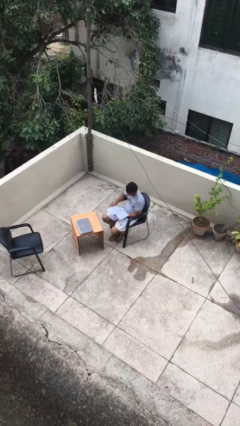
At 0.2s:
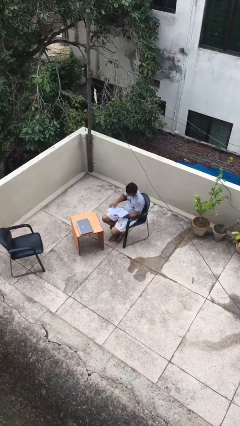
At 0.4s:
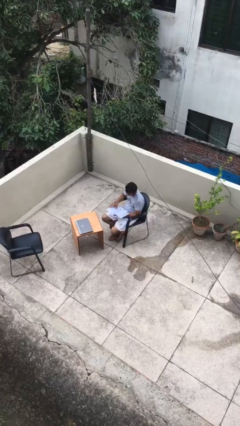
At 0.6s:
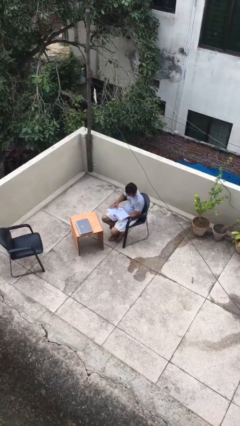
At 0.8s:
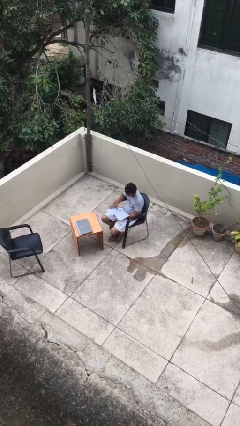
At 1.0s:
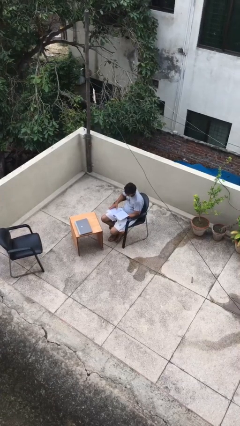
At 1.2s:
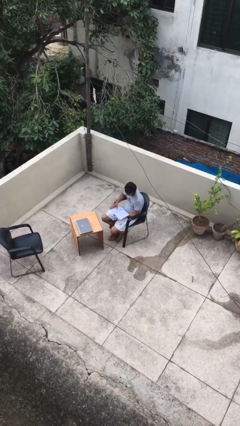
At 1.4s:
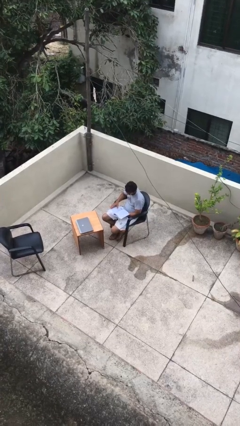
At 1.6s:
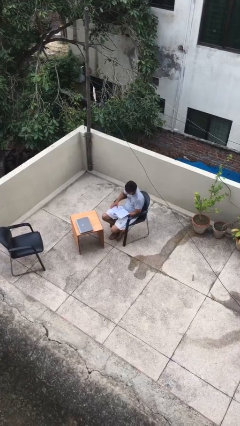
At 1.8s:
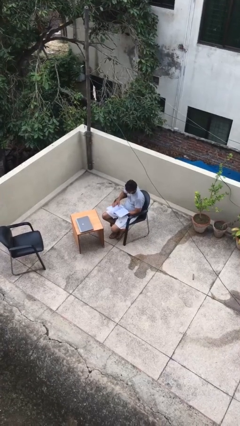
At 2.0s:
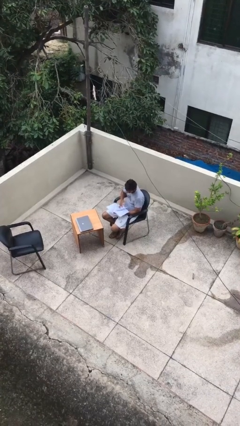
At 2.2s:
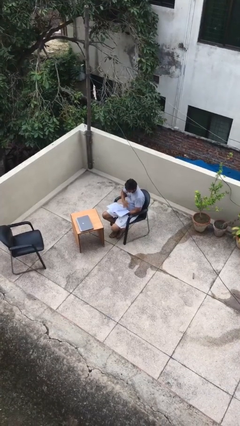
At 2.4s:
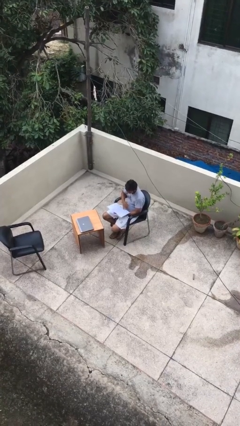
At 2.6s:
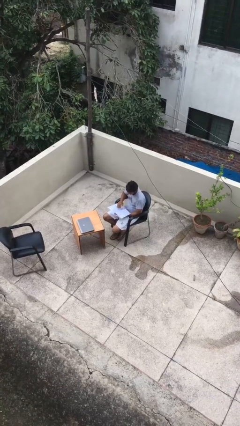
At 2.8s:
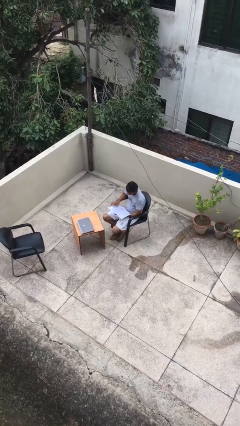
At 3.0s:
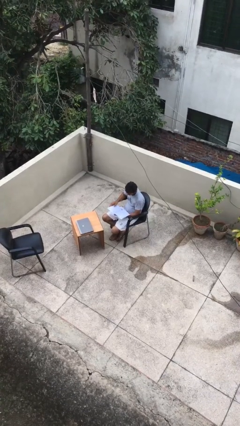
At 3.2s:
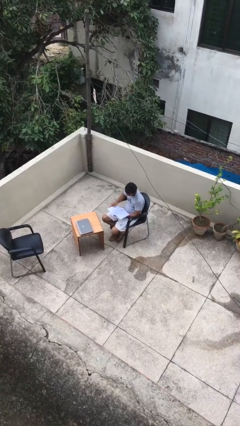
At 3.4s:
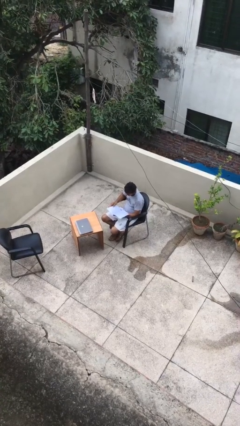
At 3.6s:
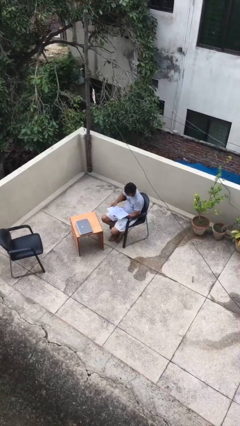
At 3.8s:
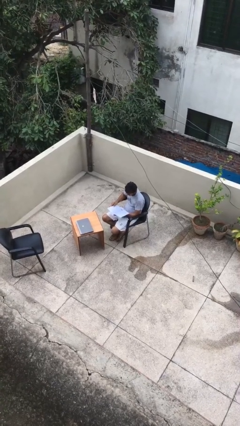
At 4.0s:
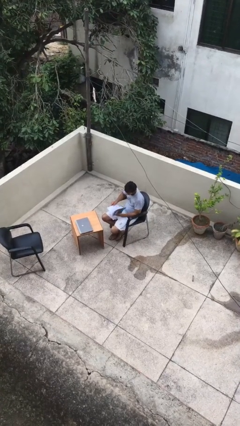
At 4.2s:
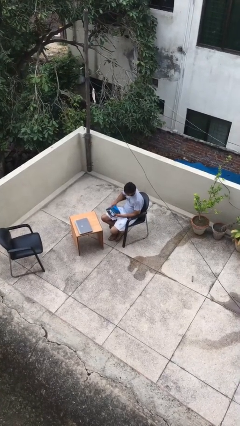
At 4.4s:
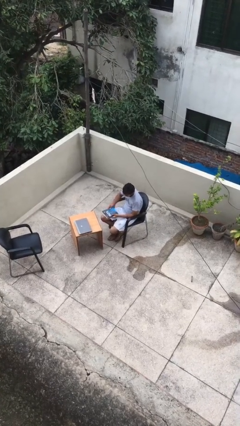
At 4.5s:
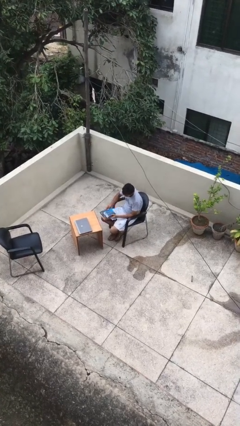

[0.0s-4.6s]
person reads document

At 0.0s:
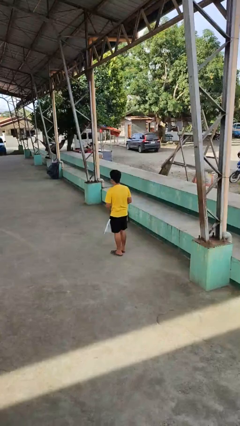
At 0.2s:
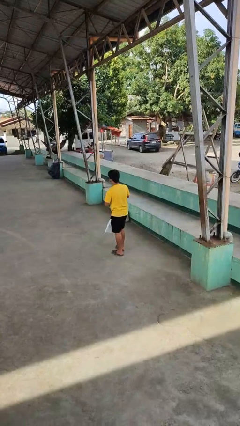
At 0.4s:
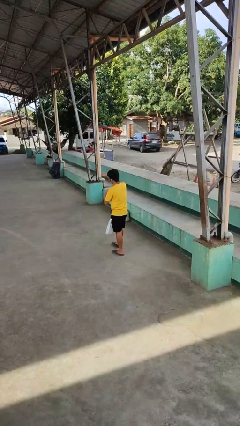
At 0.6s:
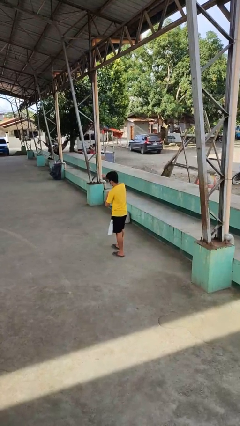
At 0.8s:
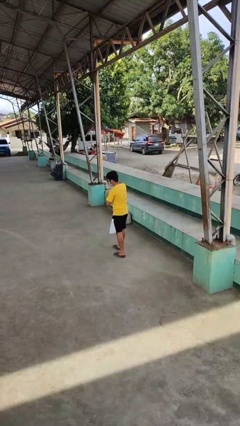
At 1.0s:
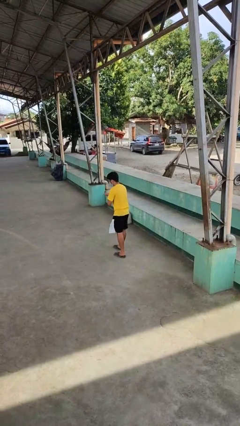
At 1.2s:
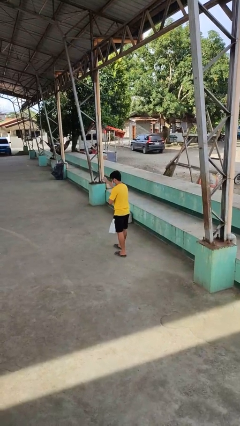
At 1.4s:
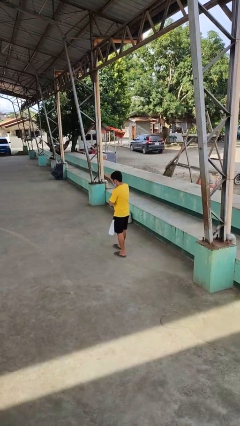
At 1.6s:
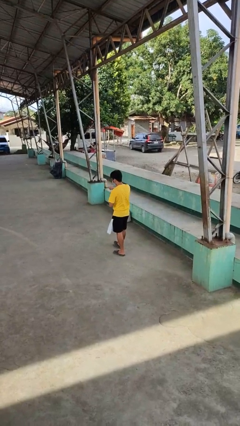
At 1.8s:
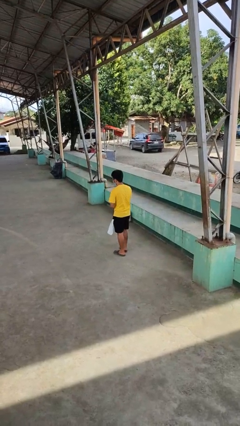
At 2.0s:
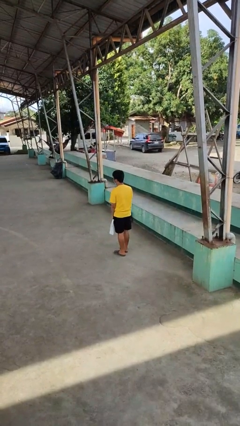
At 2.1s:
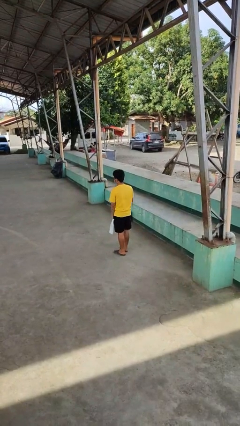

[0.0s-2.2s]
person punches

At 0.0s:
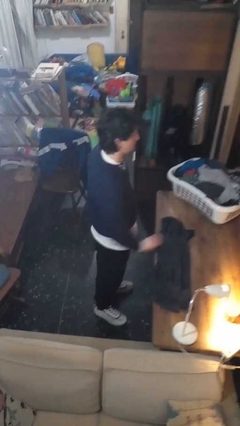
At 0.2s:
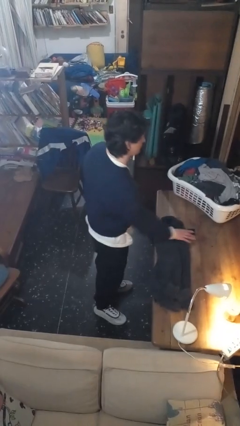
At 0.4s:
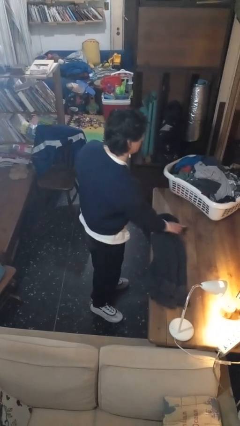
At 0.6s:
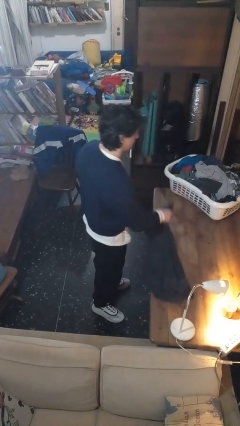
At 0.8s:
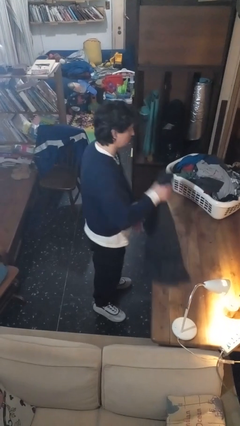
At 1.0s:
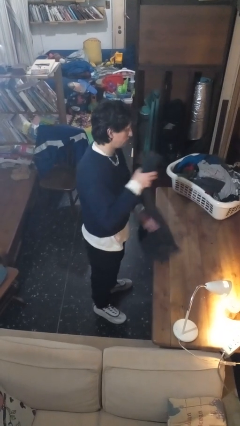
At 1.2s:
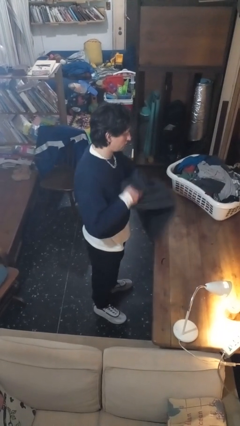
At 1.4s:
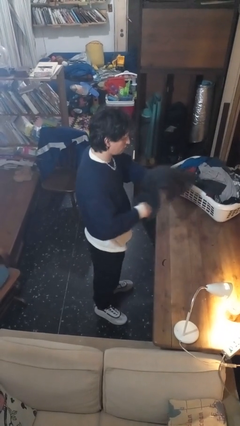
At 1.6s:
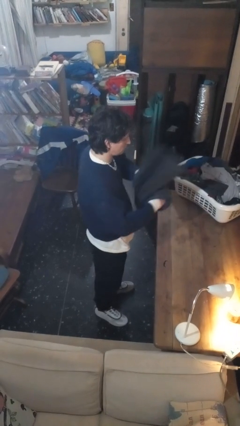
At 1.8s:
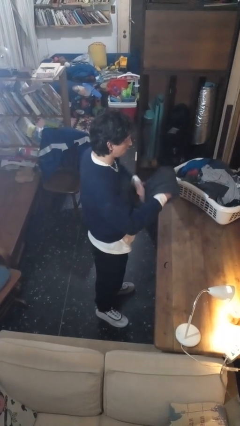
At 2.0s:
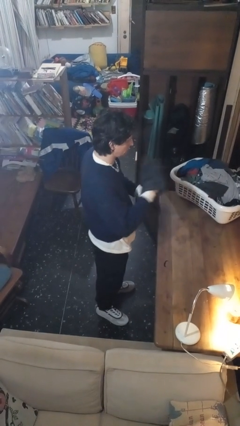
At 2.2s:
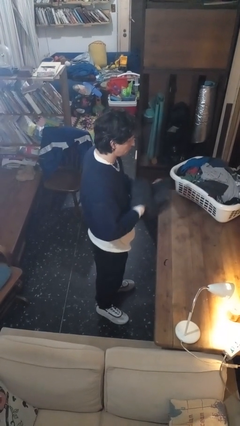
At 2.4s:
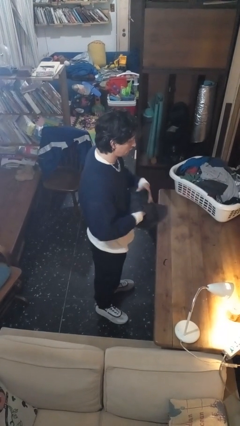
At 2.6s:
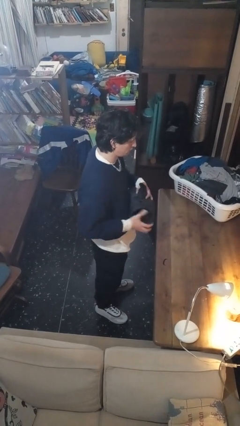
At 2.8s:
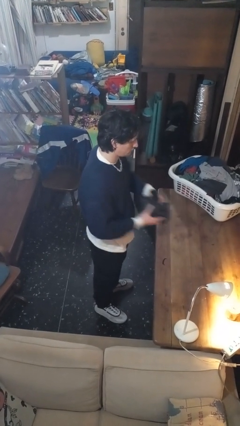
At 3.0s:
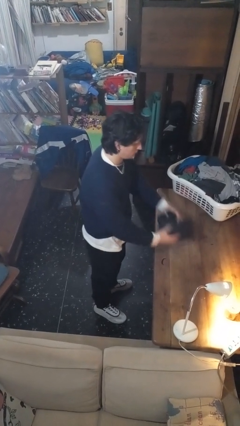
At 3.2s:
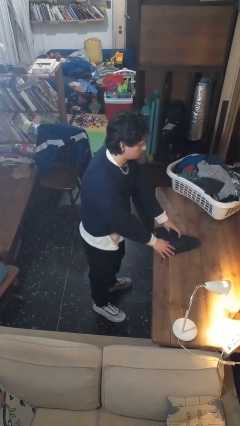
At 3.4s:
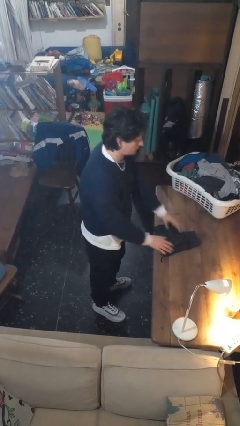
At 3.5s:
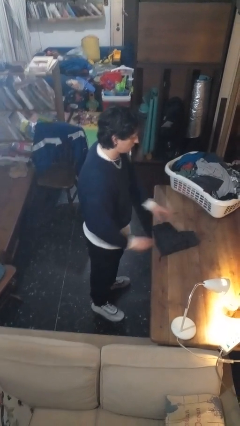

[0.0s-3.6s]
person folds pants

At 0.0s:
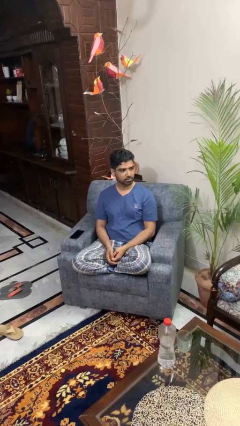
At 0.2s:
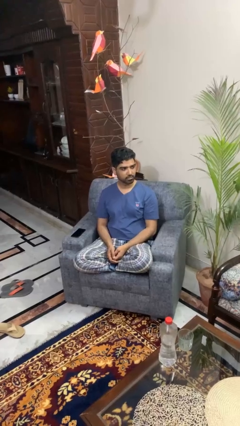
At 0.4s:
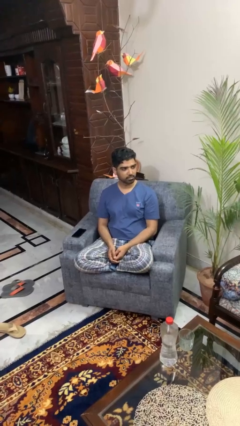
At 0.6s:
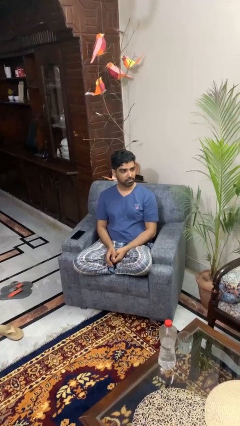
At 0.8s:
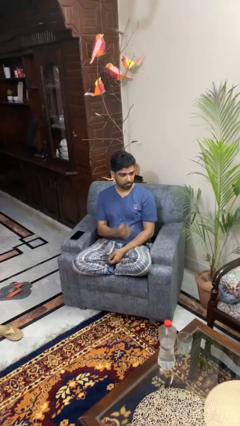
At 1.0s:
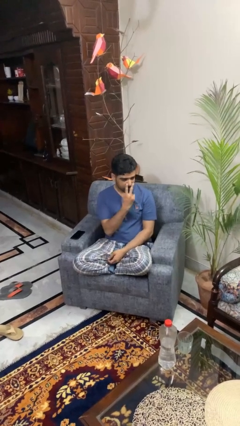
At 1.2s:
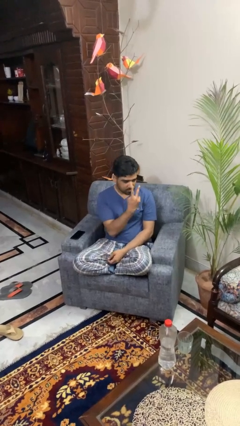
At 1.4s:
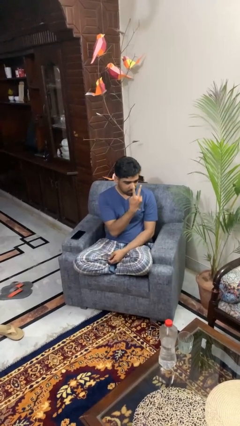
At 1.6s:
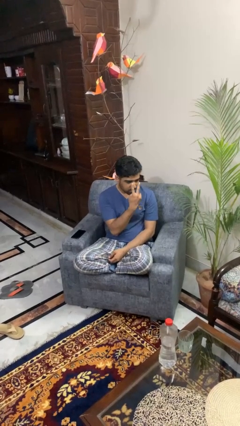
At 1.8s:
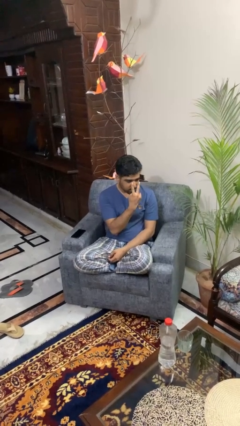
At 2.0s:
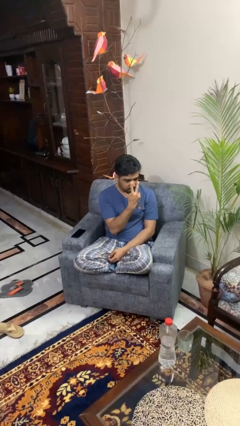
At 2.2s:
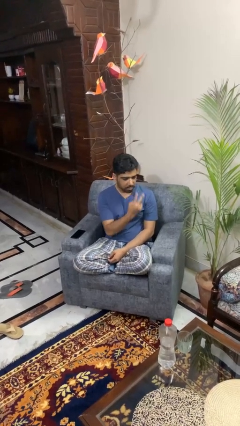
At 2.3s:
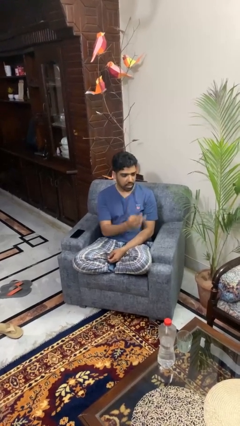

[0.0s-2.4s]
person gestures watch closely

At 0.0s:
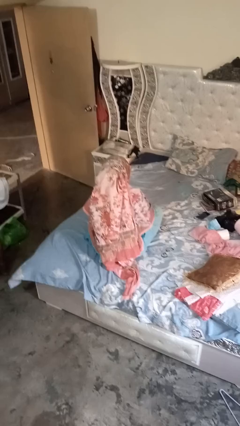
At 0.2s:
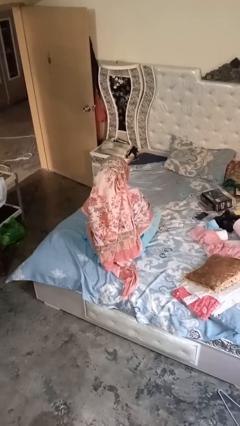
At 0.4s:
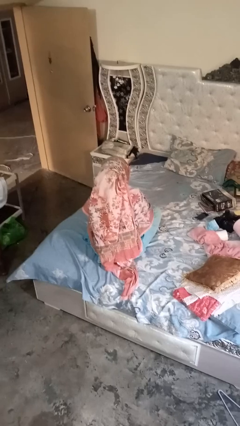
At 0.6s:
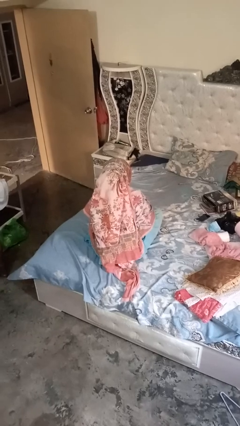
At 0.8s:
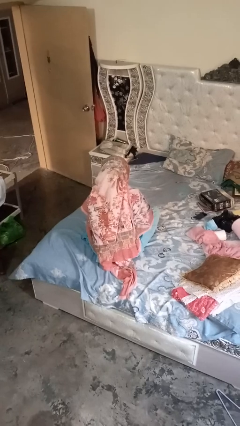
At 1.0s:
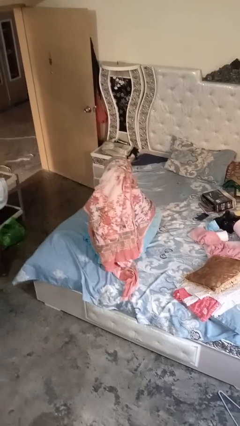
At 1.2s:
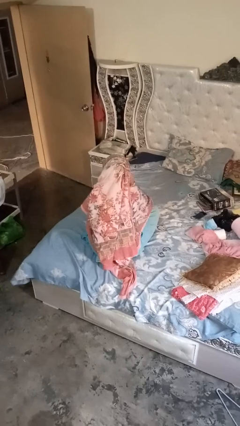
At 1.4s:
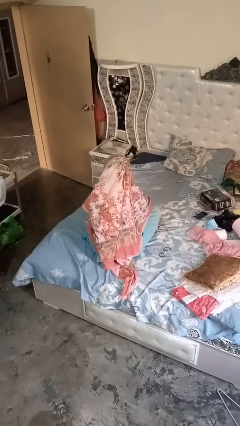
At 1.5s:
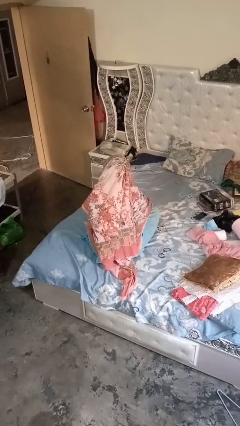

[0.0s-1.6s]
person gestures listen closely

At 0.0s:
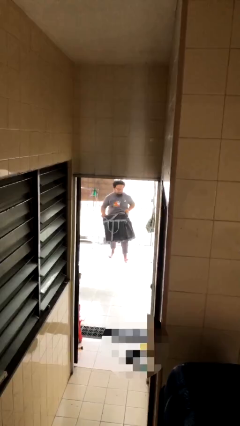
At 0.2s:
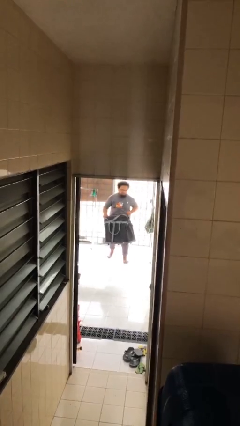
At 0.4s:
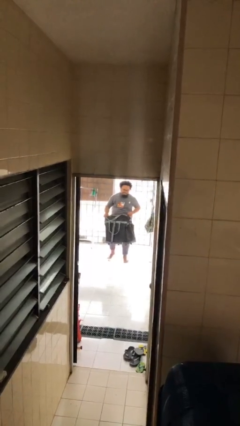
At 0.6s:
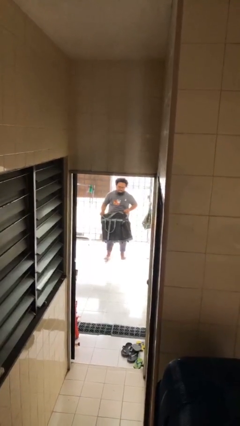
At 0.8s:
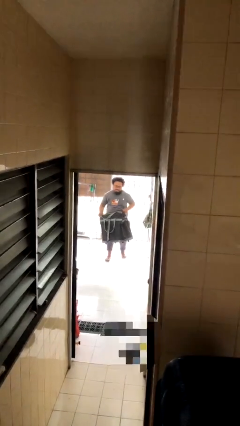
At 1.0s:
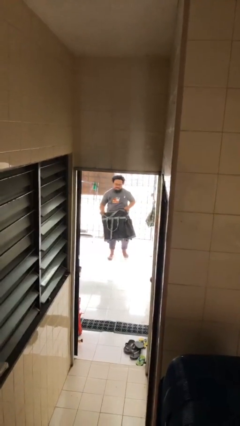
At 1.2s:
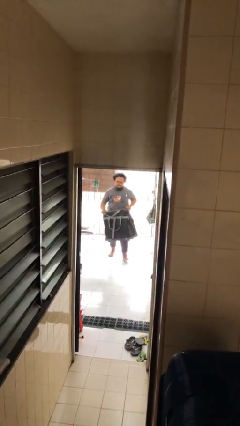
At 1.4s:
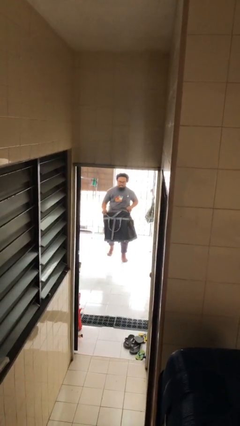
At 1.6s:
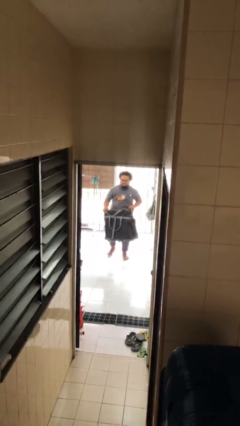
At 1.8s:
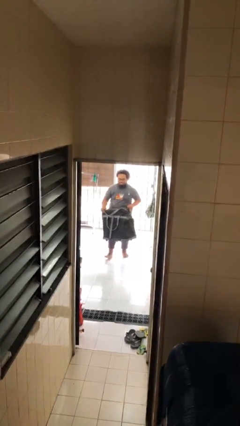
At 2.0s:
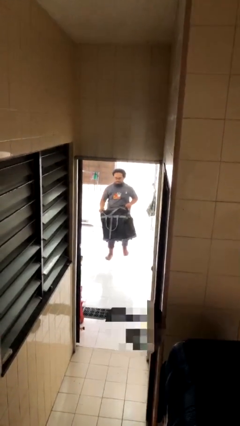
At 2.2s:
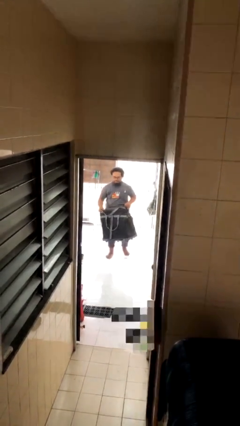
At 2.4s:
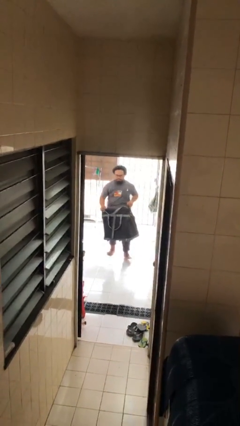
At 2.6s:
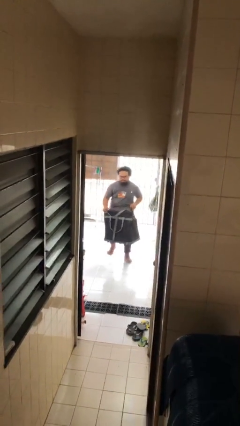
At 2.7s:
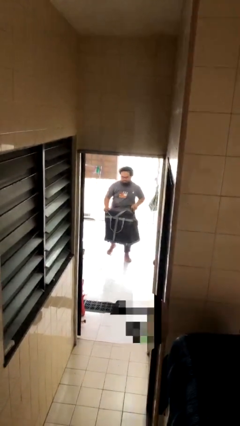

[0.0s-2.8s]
person carries heavy object
